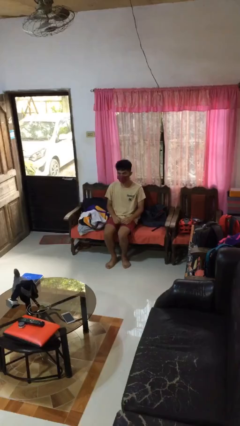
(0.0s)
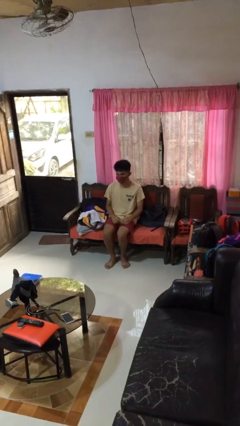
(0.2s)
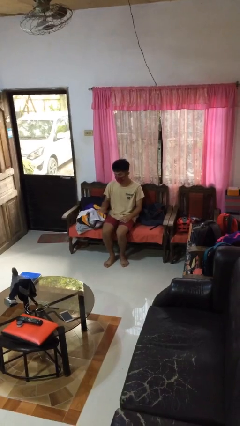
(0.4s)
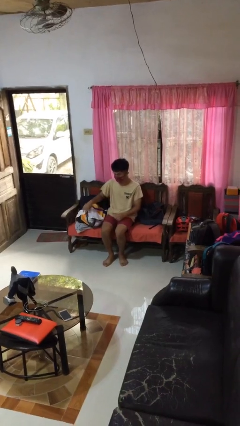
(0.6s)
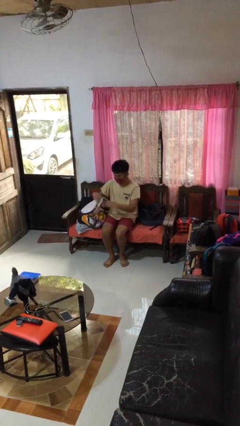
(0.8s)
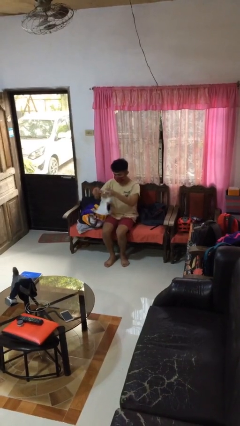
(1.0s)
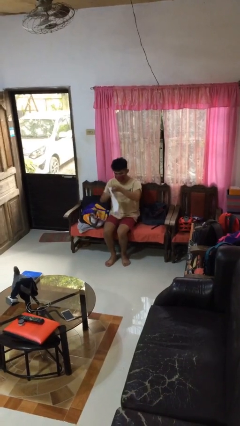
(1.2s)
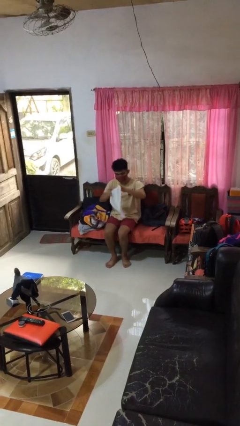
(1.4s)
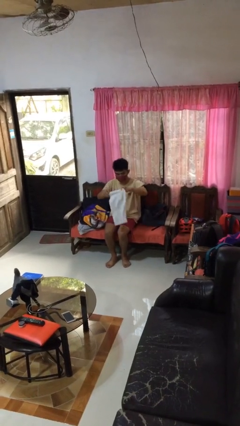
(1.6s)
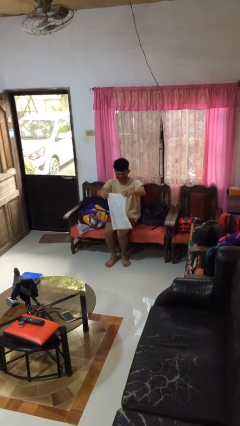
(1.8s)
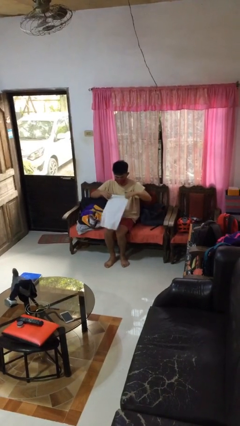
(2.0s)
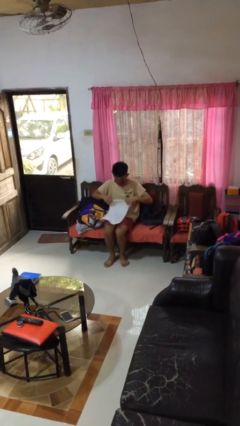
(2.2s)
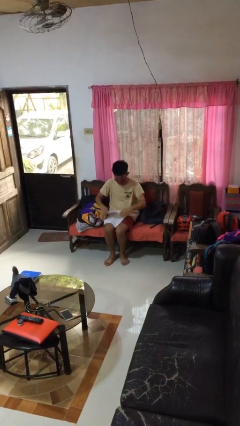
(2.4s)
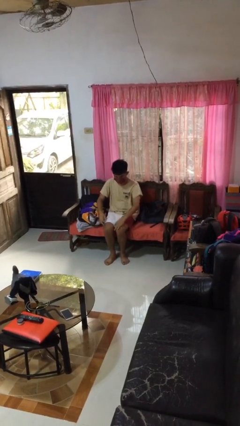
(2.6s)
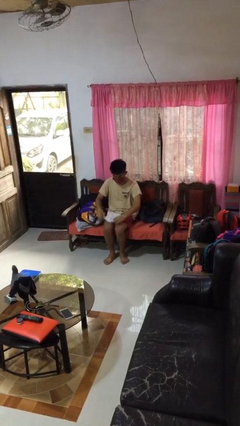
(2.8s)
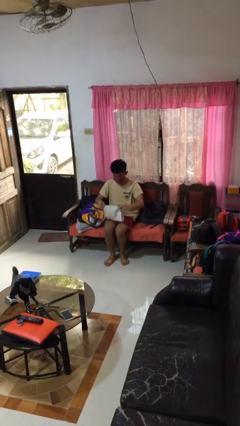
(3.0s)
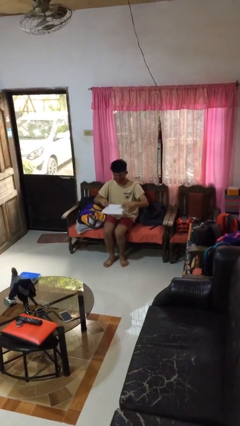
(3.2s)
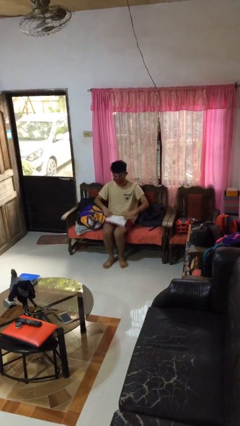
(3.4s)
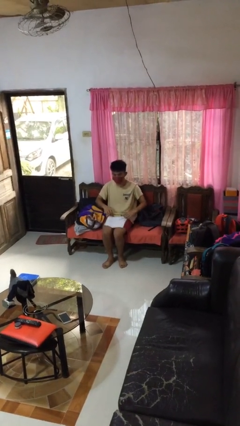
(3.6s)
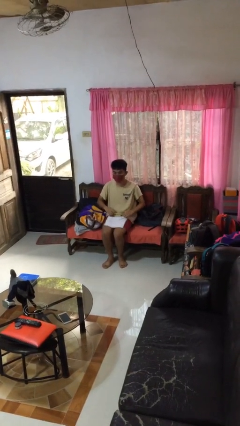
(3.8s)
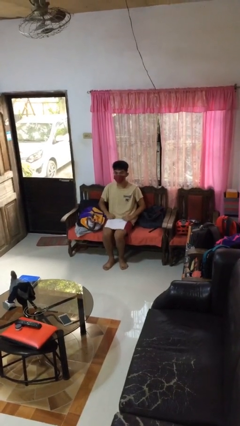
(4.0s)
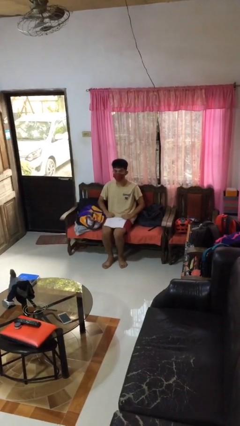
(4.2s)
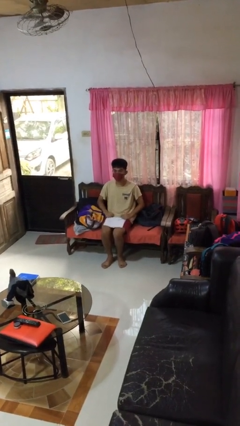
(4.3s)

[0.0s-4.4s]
person folds towel

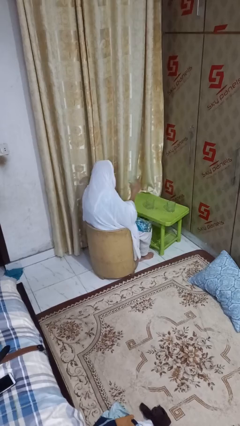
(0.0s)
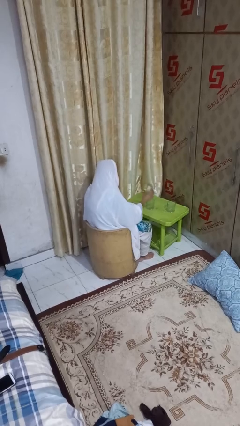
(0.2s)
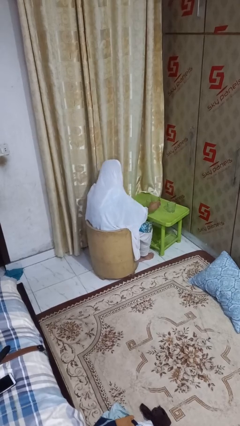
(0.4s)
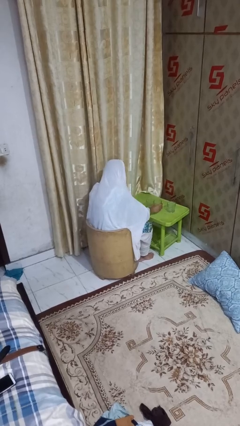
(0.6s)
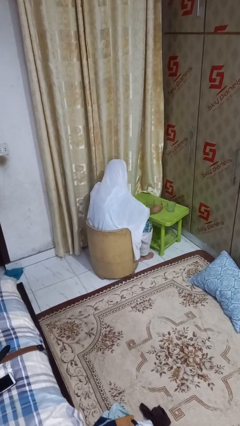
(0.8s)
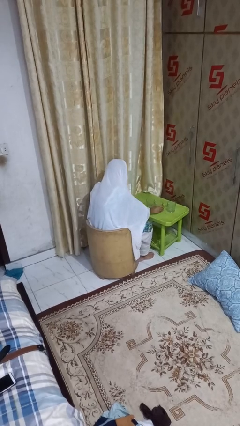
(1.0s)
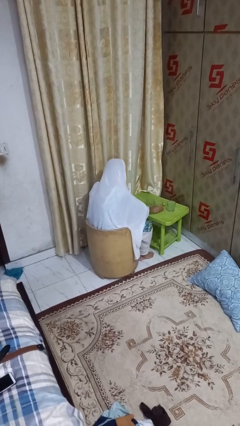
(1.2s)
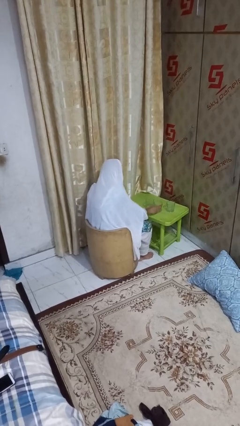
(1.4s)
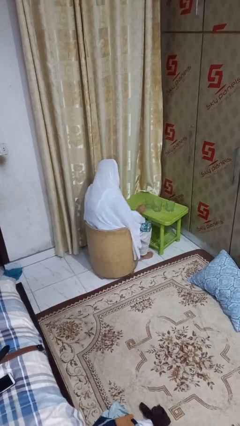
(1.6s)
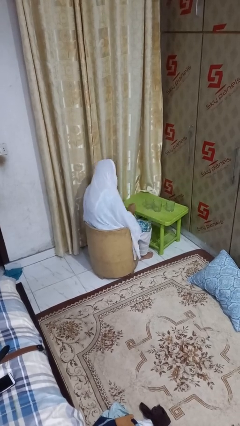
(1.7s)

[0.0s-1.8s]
person puts down object on table

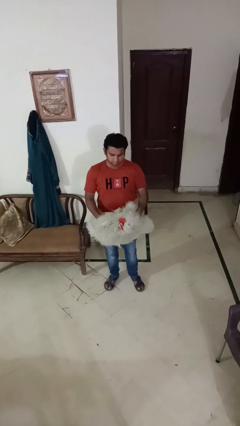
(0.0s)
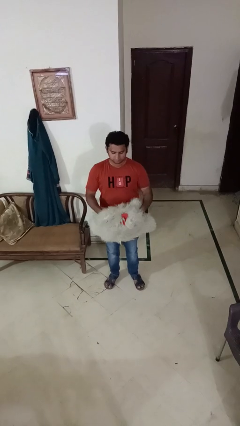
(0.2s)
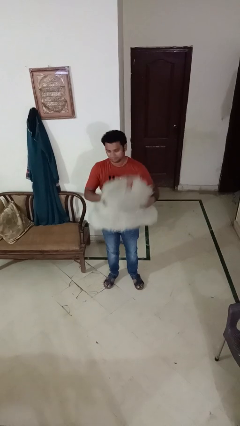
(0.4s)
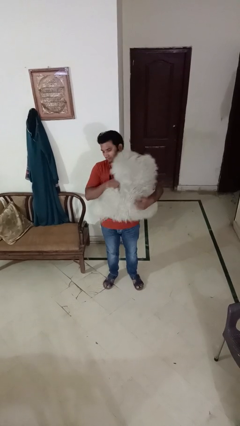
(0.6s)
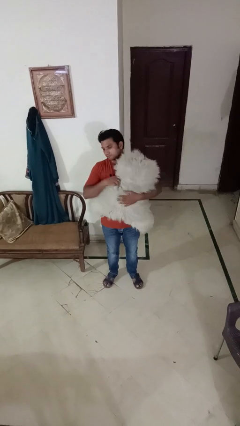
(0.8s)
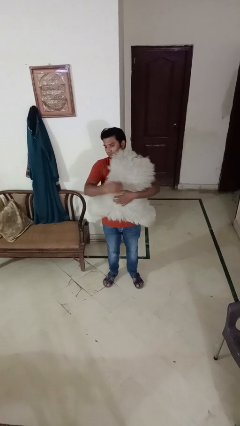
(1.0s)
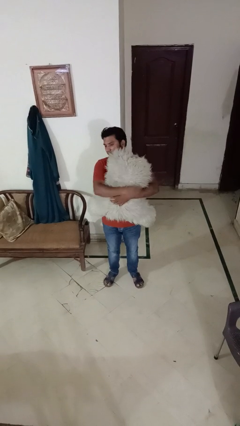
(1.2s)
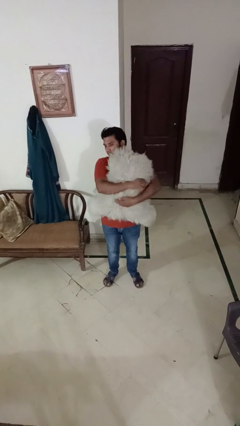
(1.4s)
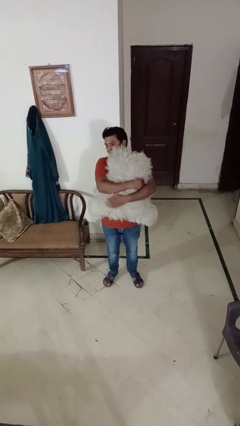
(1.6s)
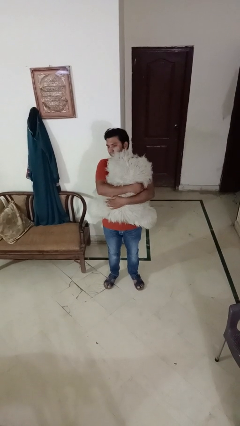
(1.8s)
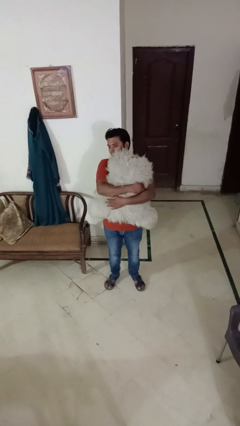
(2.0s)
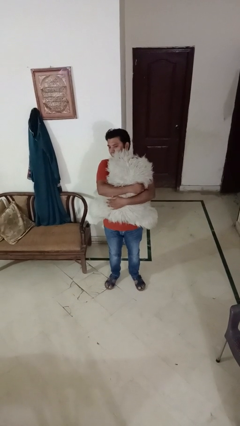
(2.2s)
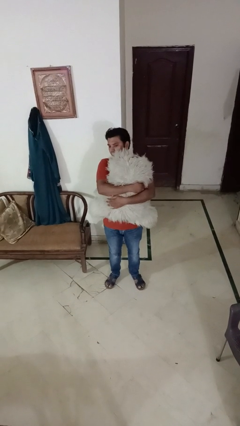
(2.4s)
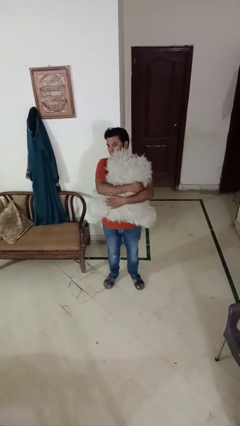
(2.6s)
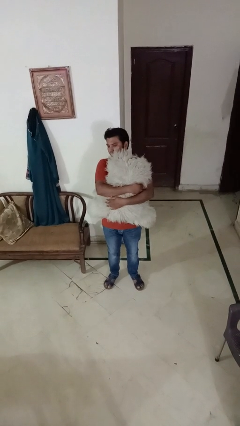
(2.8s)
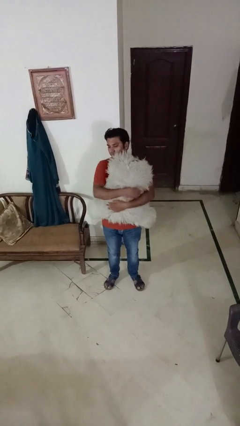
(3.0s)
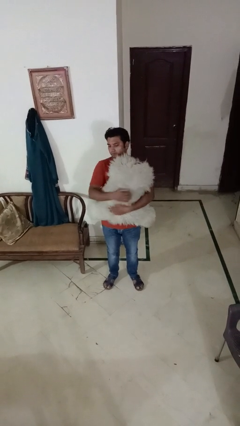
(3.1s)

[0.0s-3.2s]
person hugs stuffed animal

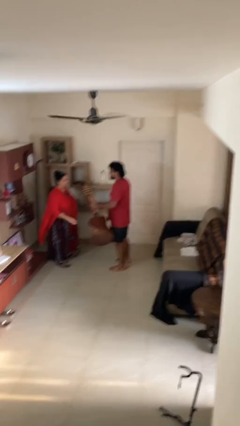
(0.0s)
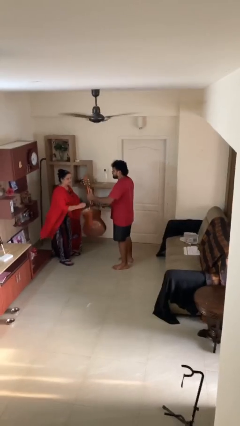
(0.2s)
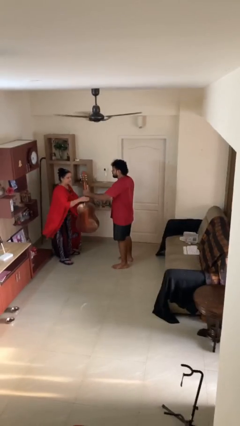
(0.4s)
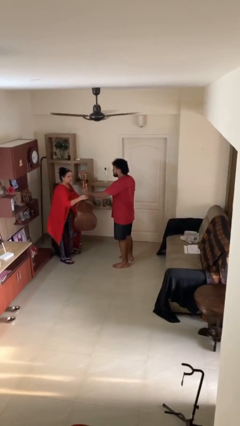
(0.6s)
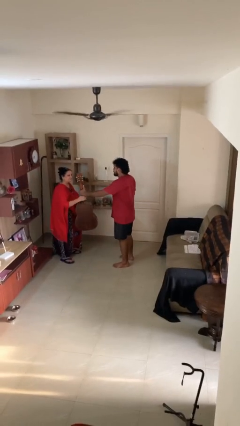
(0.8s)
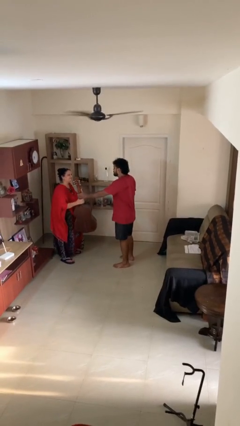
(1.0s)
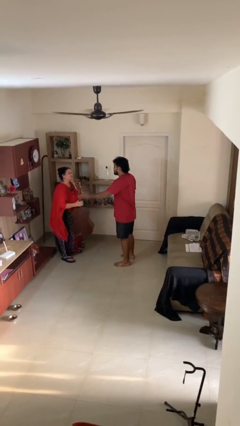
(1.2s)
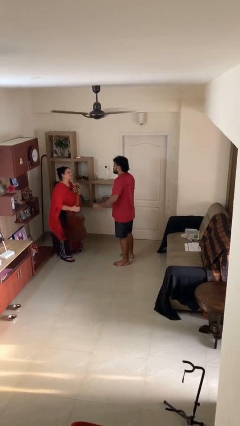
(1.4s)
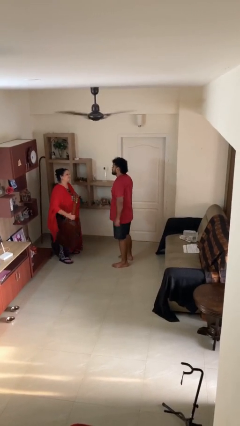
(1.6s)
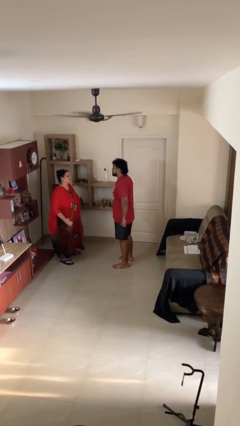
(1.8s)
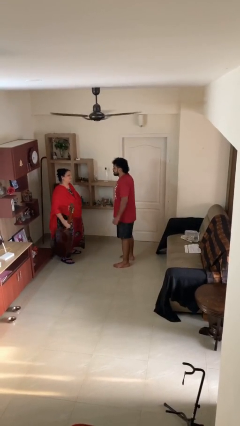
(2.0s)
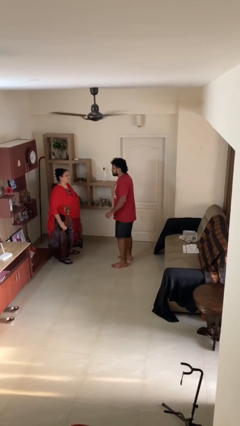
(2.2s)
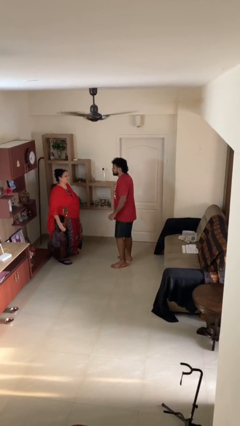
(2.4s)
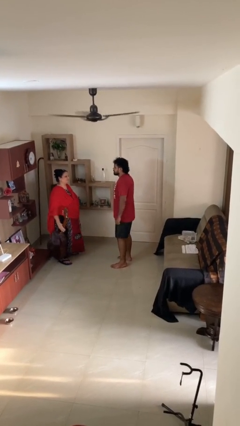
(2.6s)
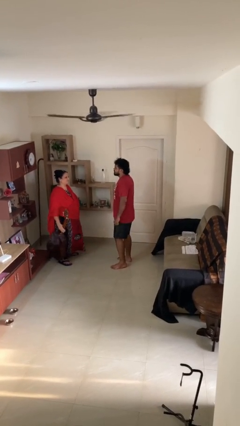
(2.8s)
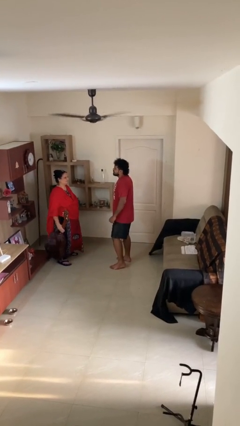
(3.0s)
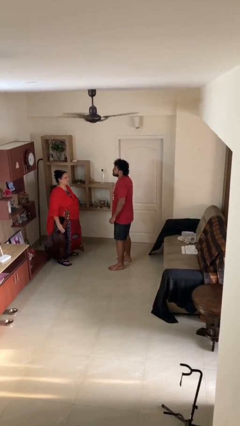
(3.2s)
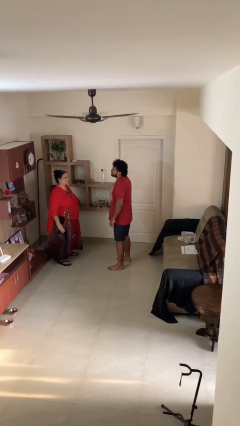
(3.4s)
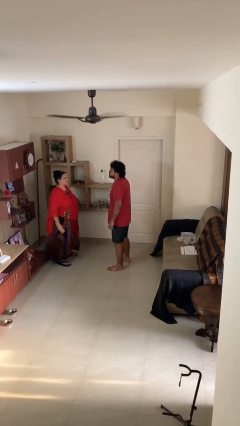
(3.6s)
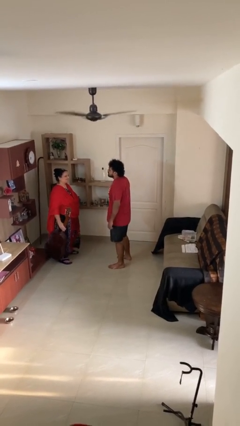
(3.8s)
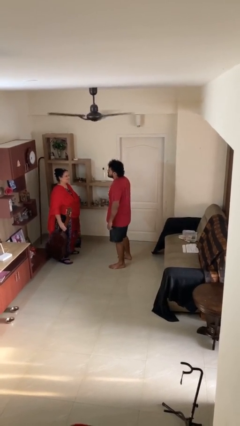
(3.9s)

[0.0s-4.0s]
person transfers object to person

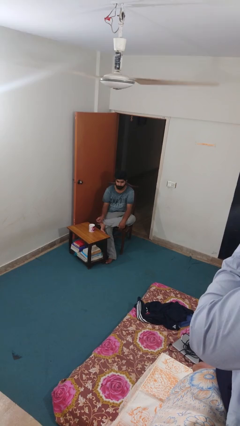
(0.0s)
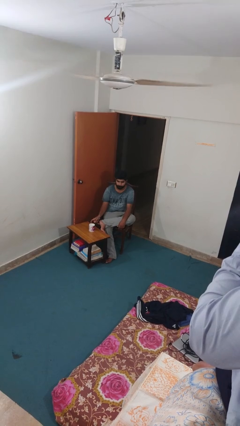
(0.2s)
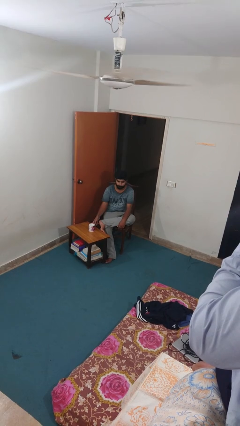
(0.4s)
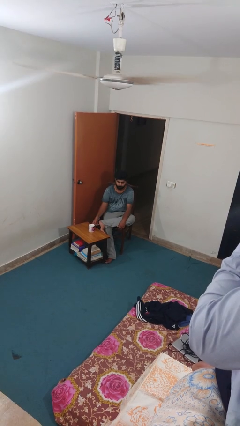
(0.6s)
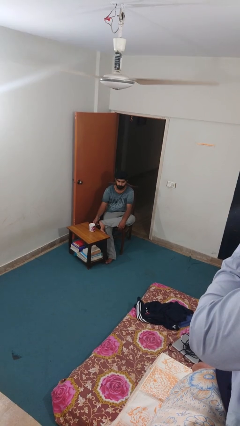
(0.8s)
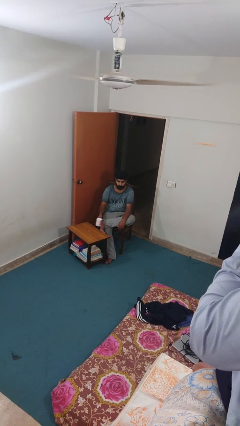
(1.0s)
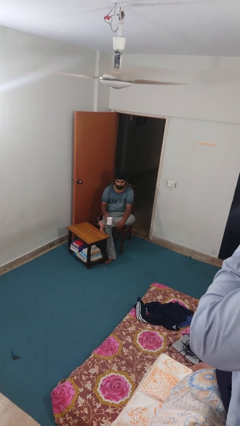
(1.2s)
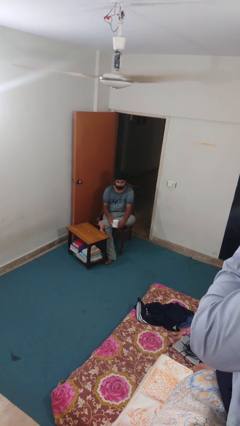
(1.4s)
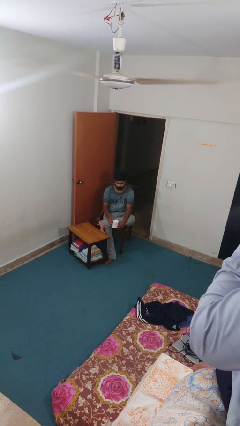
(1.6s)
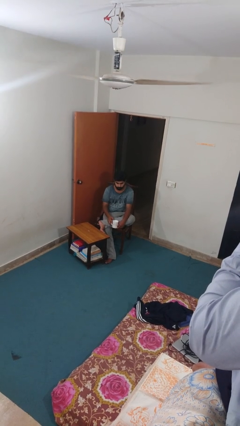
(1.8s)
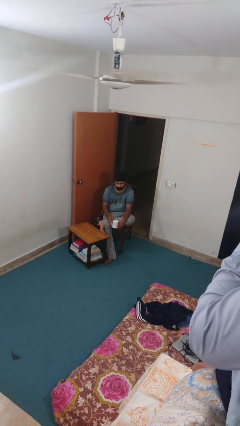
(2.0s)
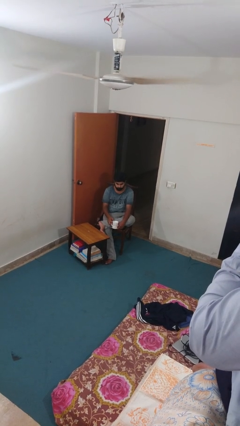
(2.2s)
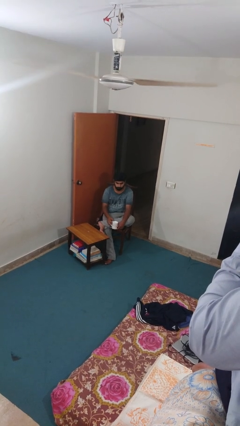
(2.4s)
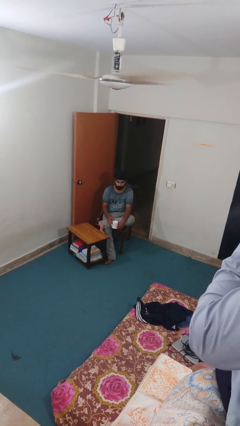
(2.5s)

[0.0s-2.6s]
person picks up object from table

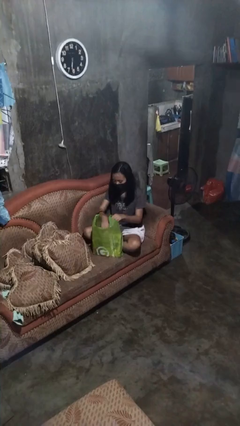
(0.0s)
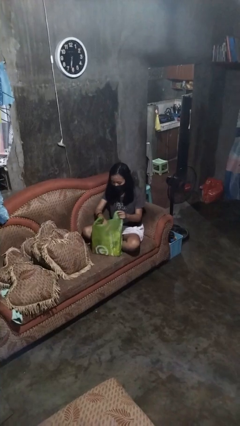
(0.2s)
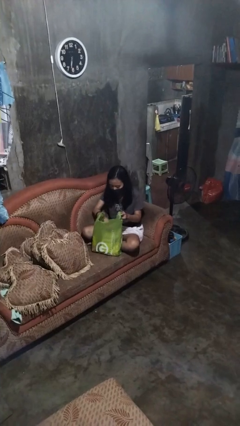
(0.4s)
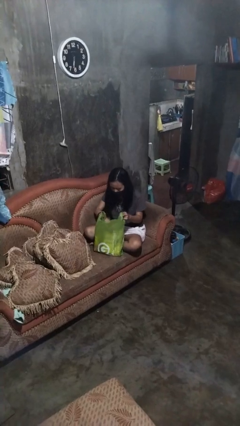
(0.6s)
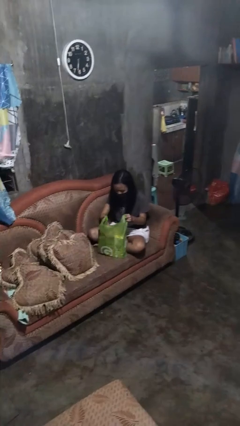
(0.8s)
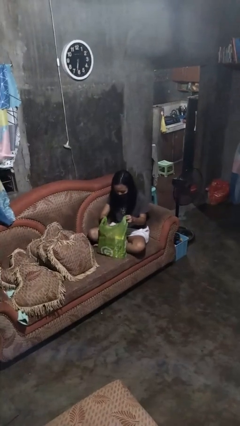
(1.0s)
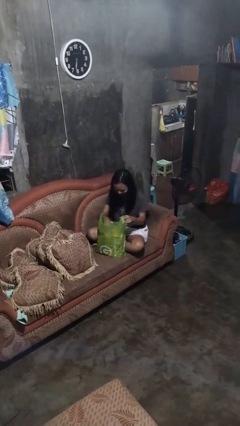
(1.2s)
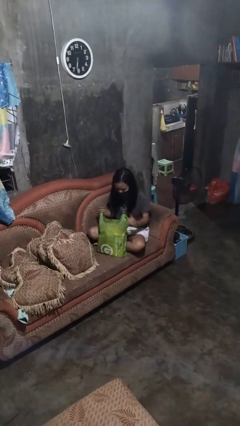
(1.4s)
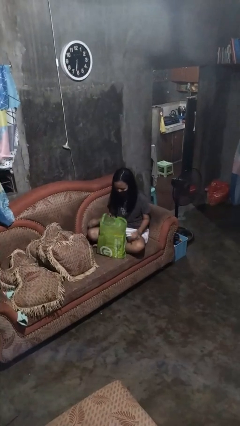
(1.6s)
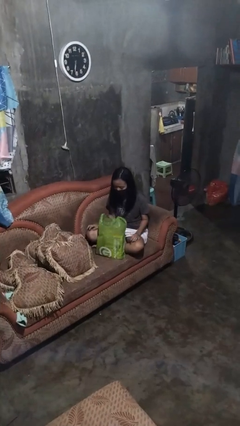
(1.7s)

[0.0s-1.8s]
person searches in bag
